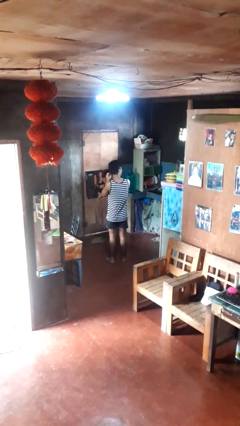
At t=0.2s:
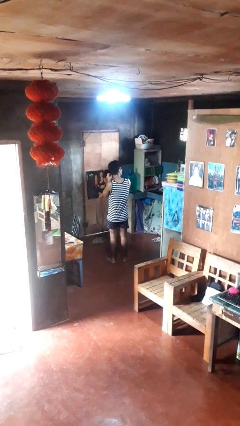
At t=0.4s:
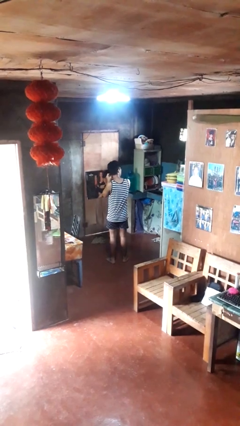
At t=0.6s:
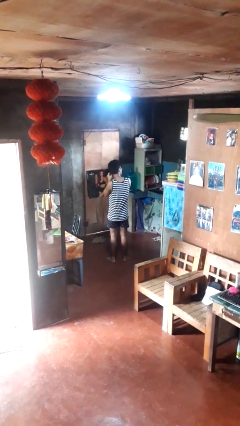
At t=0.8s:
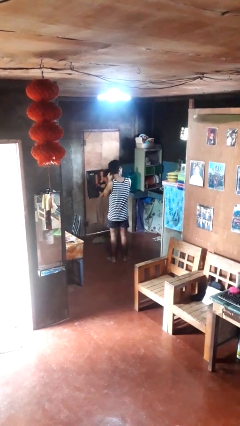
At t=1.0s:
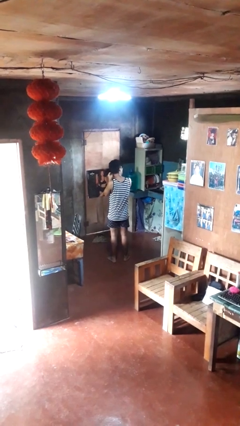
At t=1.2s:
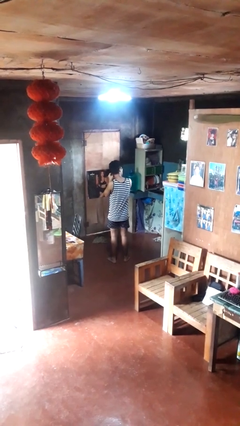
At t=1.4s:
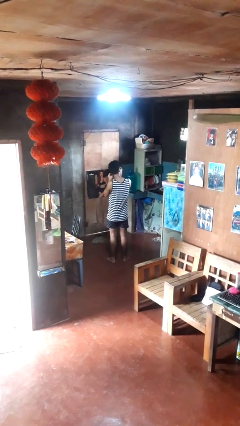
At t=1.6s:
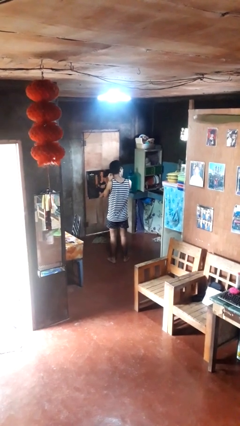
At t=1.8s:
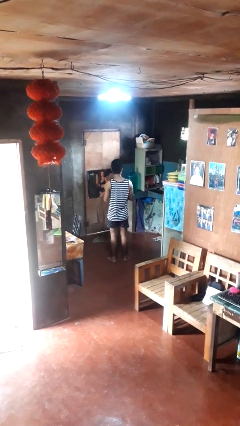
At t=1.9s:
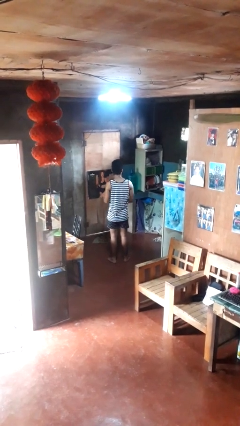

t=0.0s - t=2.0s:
person takes off earrings

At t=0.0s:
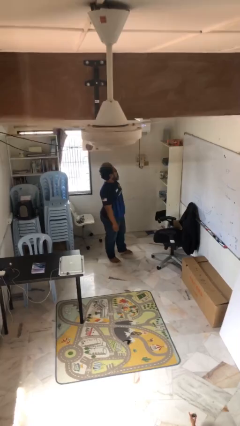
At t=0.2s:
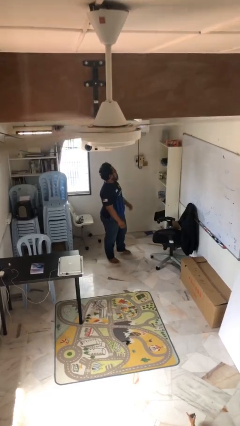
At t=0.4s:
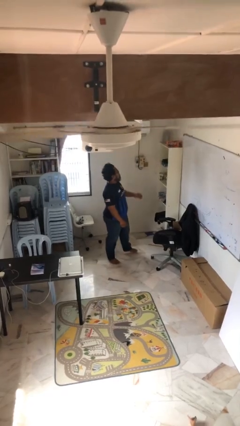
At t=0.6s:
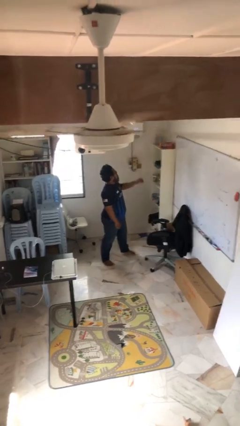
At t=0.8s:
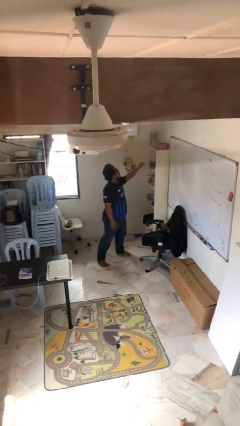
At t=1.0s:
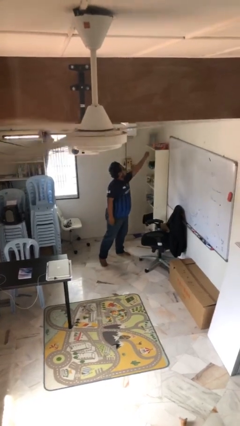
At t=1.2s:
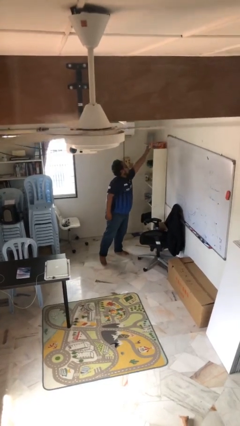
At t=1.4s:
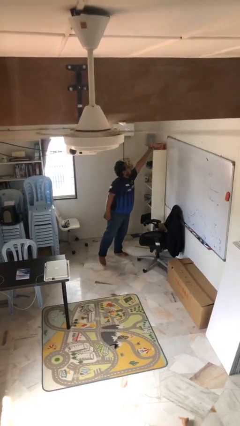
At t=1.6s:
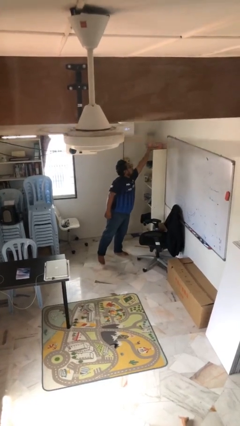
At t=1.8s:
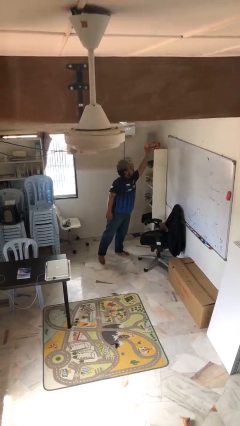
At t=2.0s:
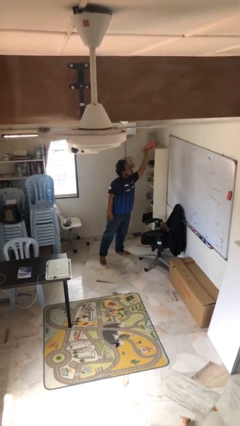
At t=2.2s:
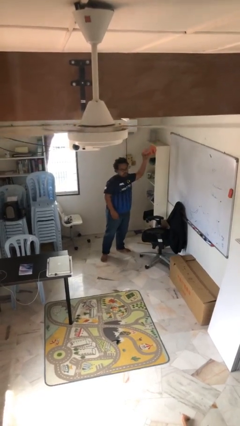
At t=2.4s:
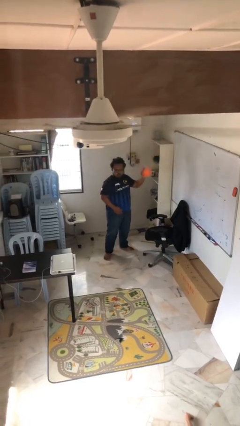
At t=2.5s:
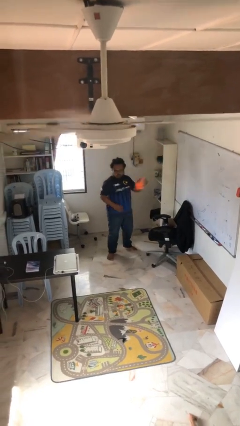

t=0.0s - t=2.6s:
person picks up object from shelf

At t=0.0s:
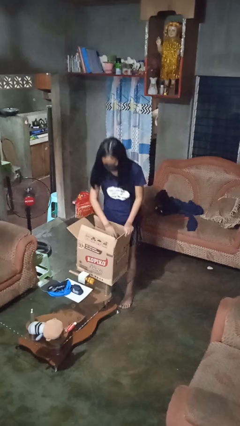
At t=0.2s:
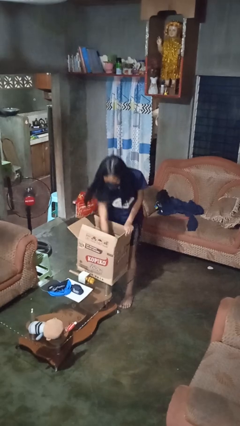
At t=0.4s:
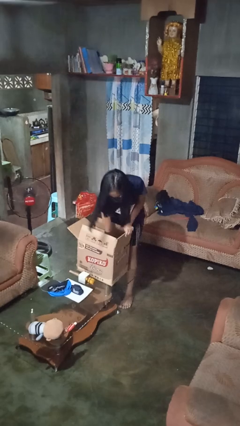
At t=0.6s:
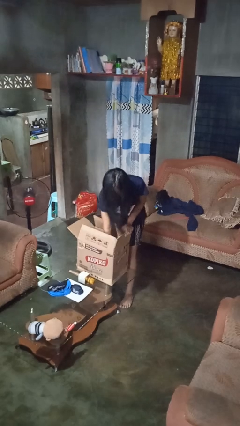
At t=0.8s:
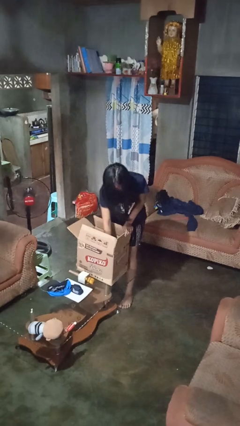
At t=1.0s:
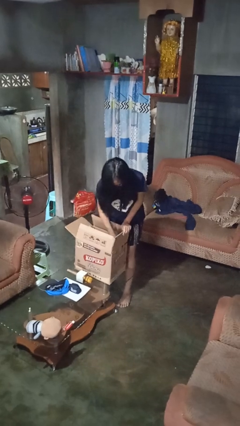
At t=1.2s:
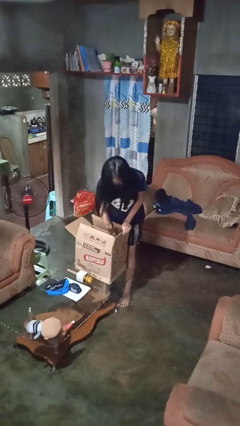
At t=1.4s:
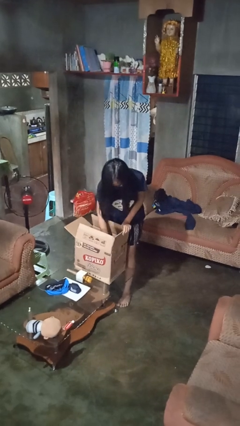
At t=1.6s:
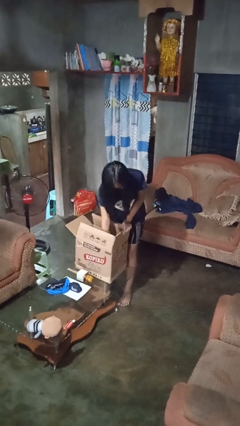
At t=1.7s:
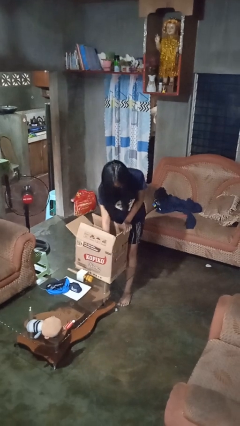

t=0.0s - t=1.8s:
person searches in box

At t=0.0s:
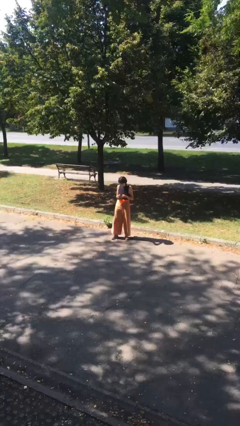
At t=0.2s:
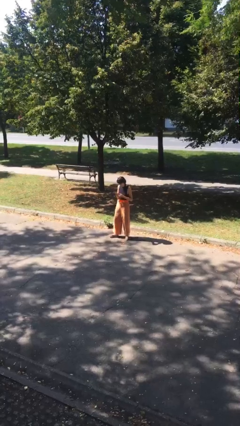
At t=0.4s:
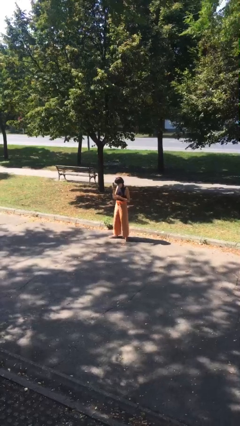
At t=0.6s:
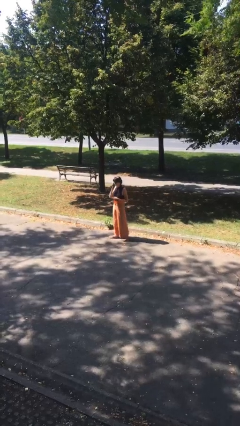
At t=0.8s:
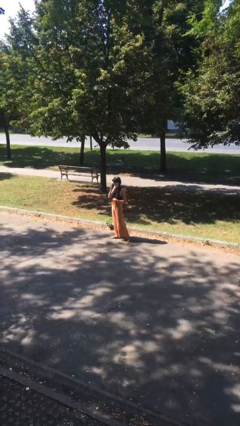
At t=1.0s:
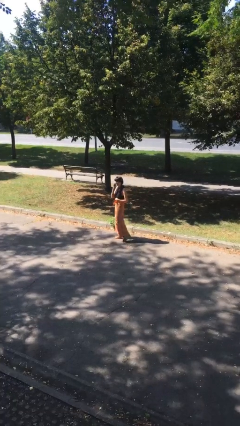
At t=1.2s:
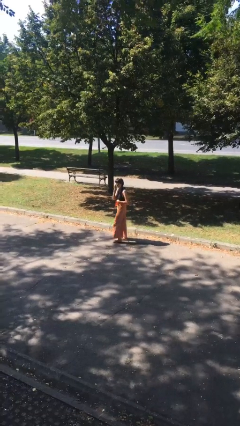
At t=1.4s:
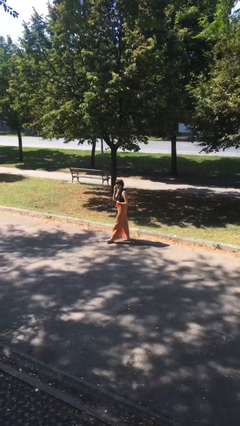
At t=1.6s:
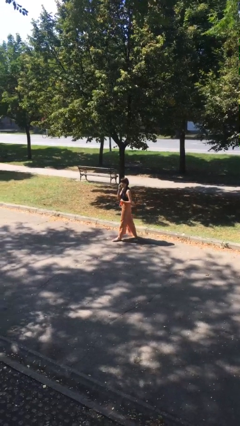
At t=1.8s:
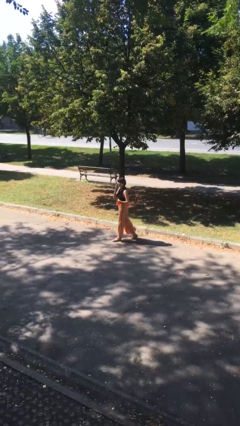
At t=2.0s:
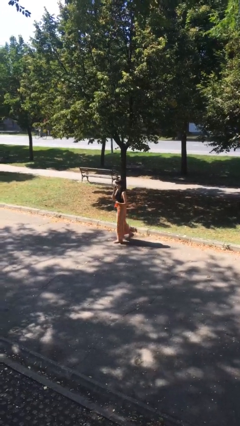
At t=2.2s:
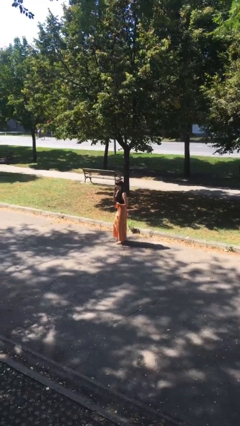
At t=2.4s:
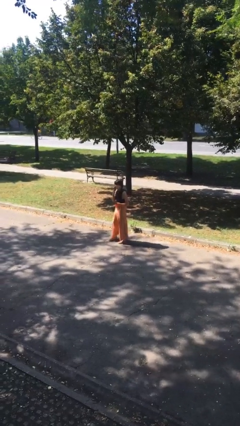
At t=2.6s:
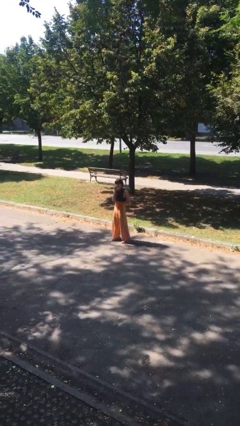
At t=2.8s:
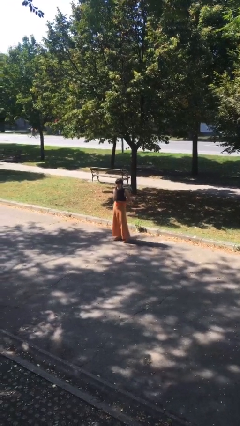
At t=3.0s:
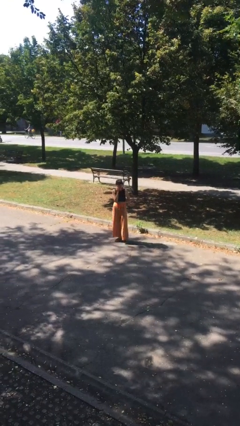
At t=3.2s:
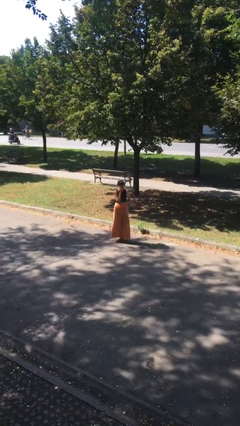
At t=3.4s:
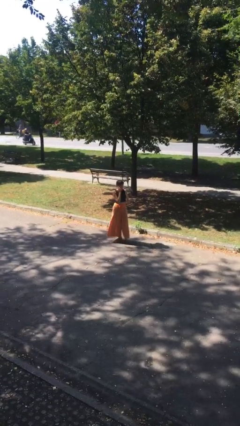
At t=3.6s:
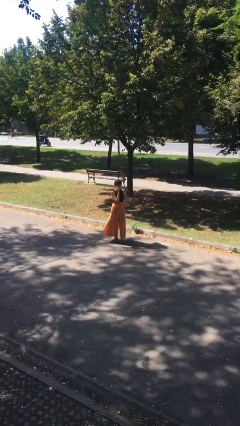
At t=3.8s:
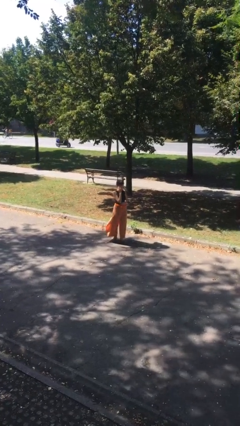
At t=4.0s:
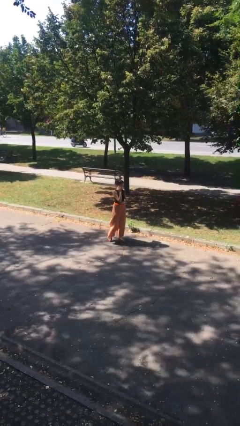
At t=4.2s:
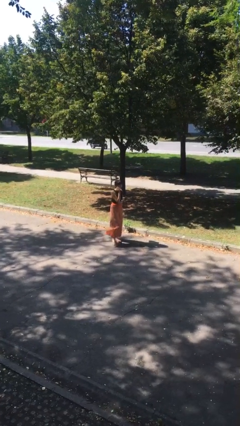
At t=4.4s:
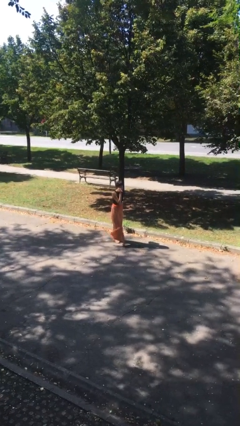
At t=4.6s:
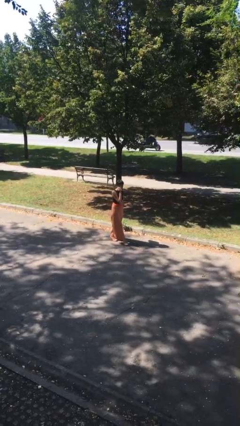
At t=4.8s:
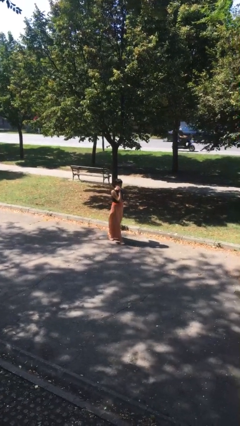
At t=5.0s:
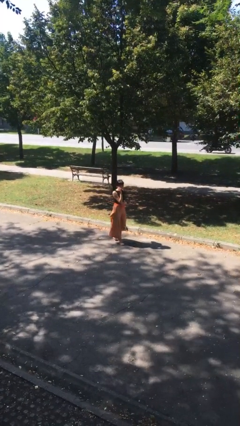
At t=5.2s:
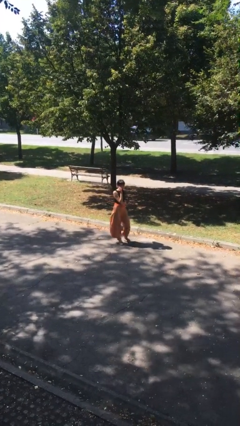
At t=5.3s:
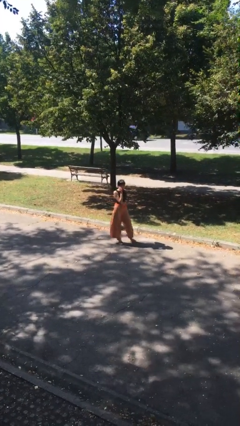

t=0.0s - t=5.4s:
person talks on phone

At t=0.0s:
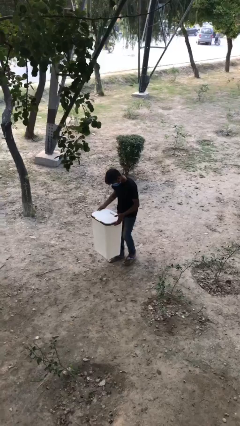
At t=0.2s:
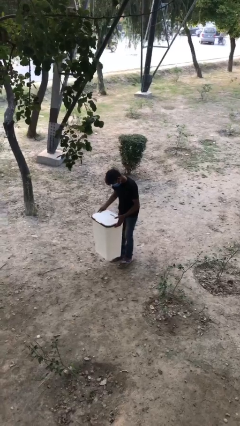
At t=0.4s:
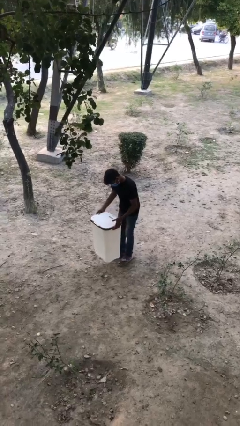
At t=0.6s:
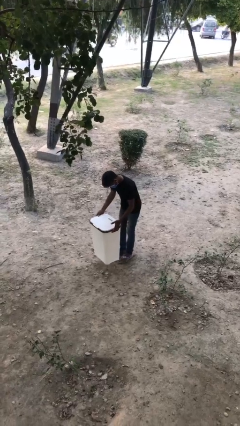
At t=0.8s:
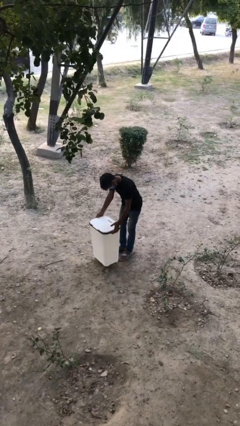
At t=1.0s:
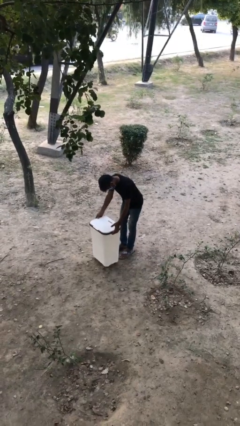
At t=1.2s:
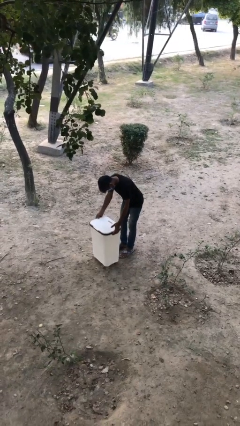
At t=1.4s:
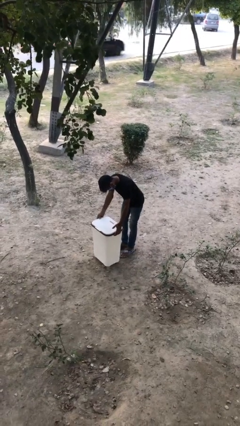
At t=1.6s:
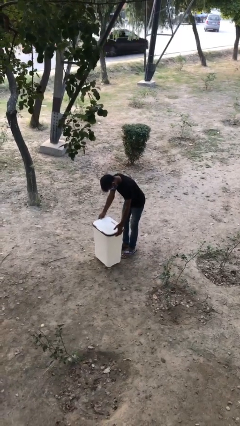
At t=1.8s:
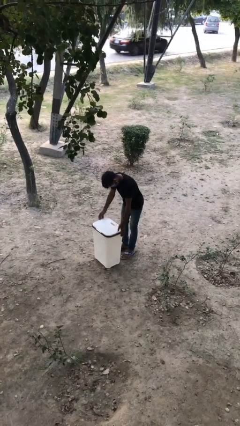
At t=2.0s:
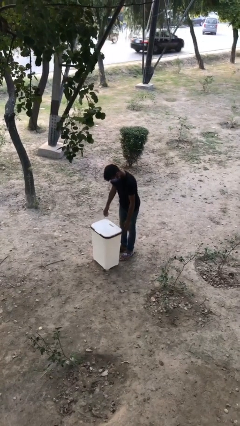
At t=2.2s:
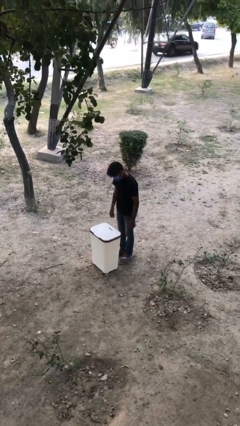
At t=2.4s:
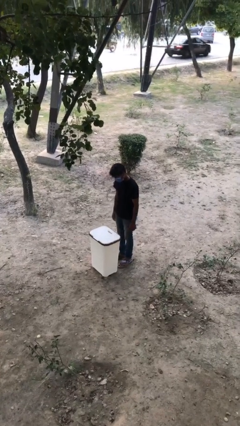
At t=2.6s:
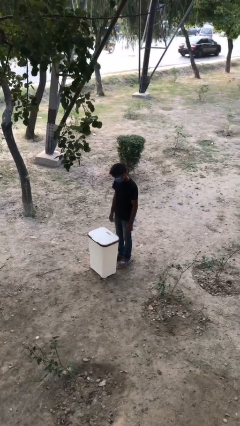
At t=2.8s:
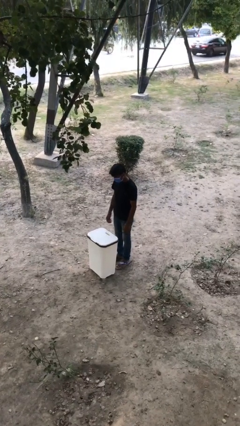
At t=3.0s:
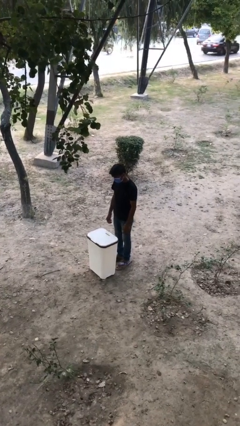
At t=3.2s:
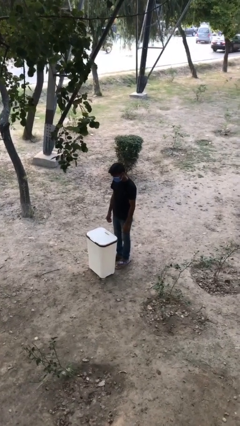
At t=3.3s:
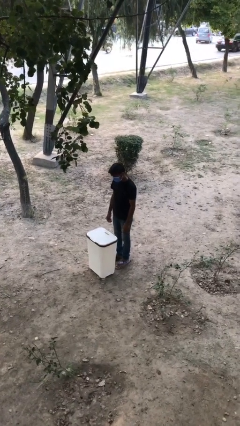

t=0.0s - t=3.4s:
person puts down object on floor

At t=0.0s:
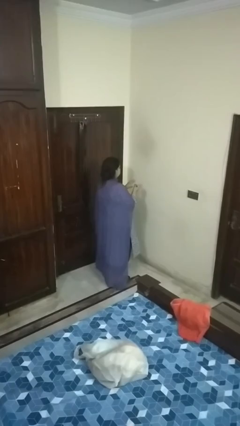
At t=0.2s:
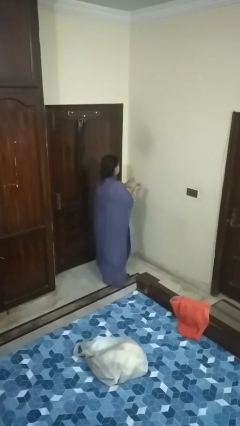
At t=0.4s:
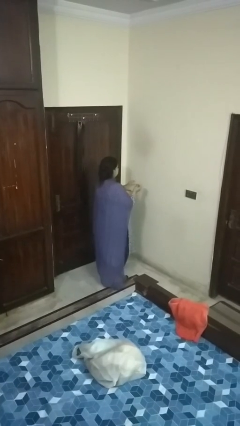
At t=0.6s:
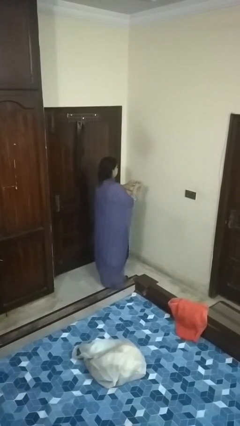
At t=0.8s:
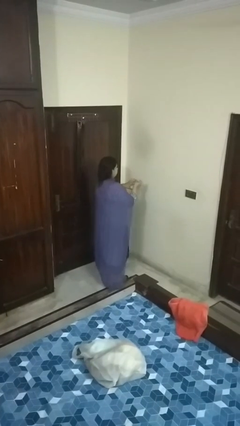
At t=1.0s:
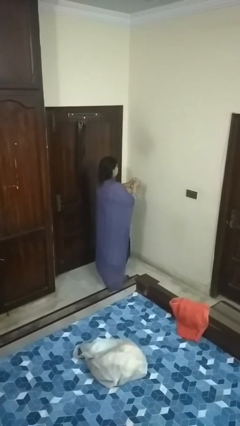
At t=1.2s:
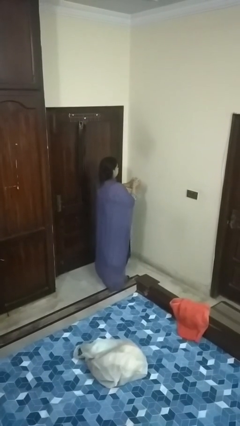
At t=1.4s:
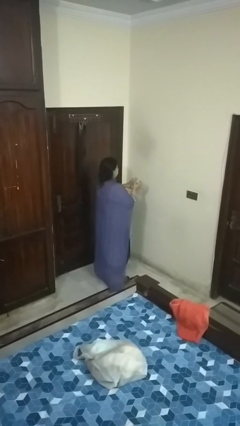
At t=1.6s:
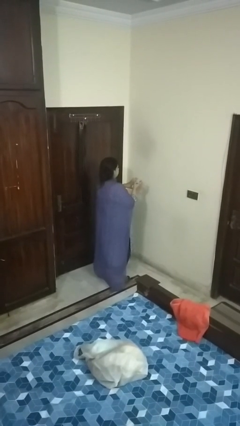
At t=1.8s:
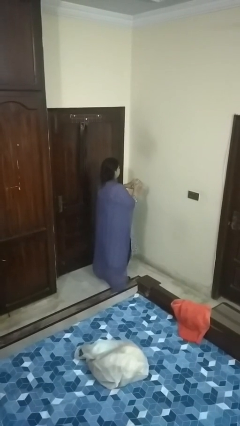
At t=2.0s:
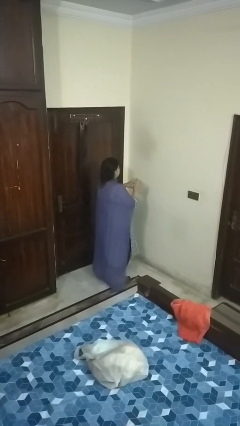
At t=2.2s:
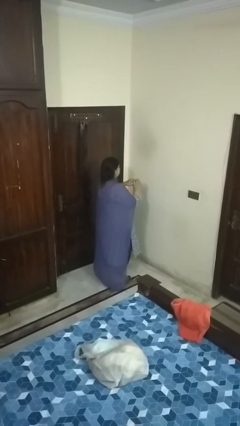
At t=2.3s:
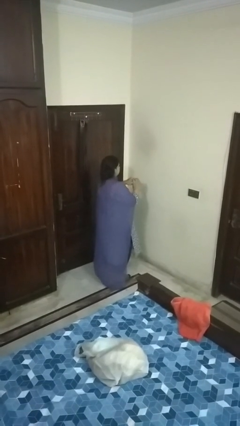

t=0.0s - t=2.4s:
person puts on ring
